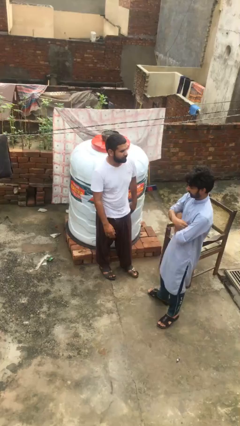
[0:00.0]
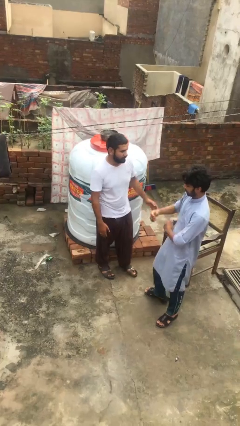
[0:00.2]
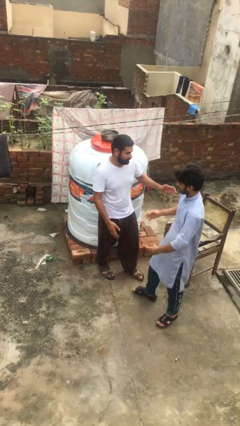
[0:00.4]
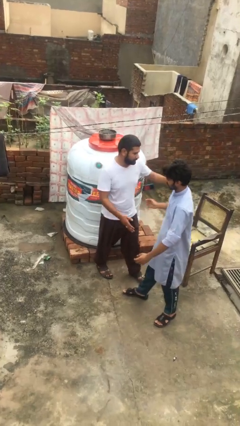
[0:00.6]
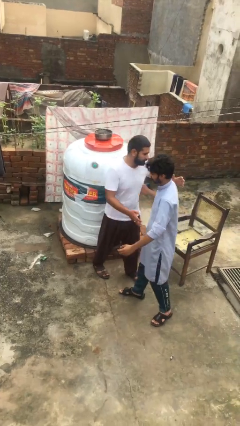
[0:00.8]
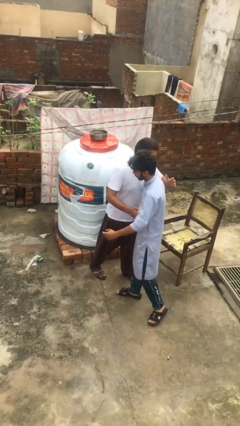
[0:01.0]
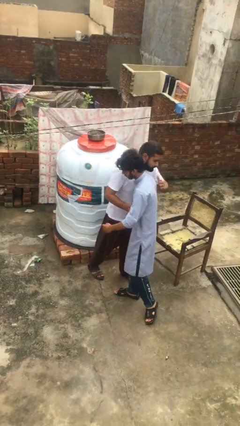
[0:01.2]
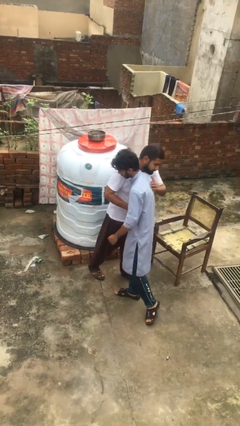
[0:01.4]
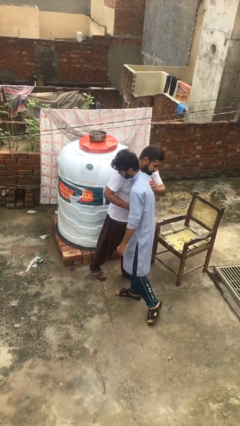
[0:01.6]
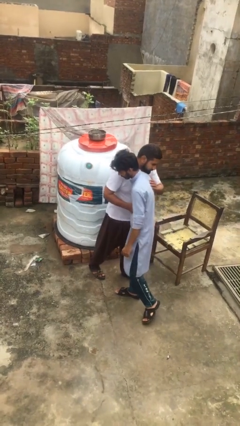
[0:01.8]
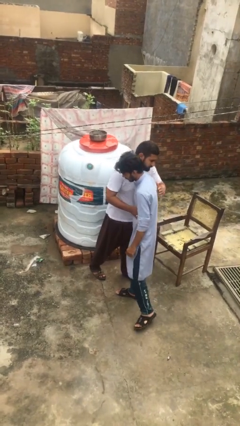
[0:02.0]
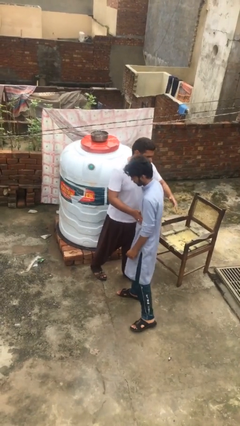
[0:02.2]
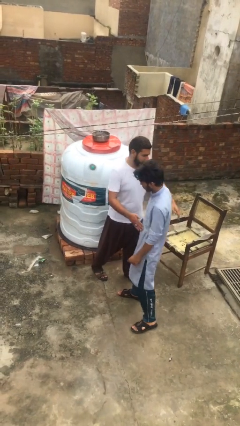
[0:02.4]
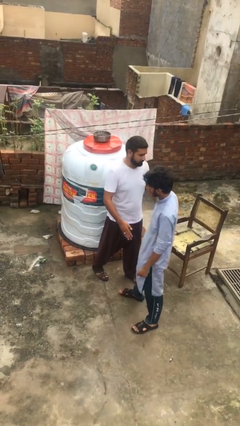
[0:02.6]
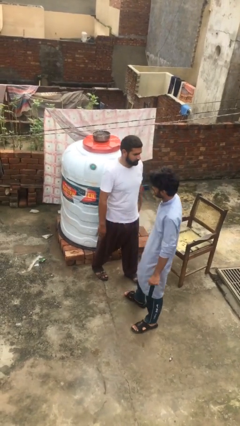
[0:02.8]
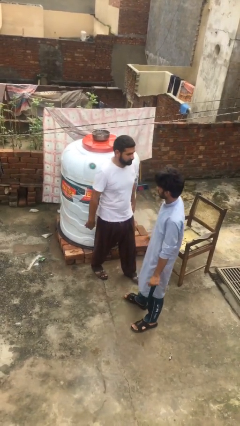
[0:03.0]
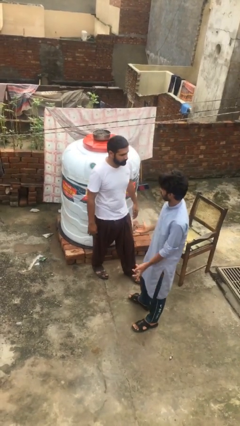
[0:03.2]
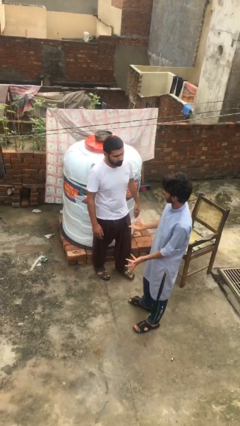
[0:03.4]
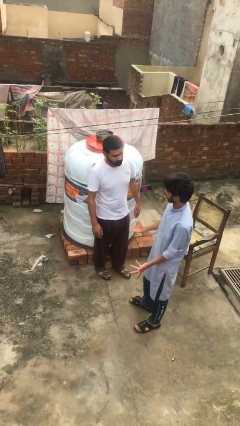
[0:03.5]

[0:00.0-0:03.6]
person embraces person

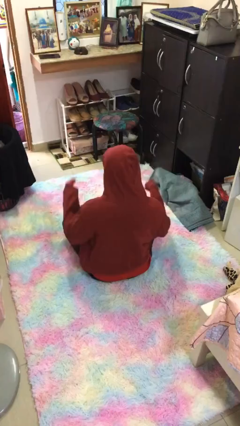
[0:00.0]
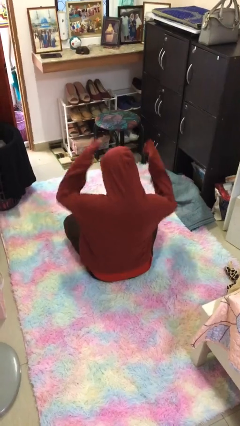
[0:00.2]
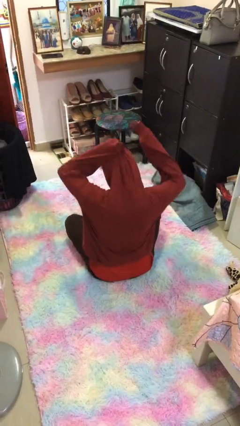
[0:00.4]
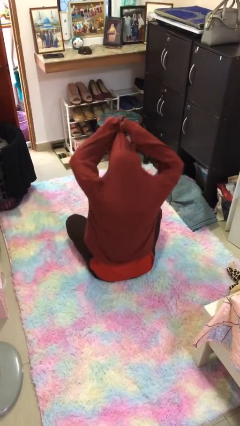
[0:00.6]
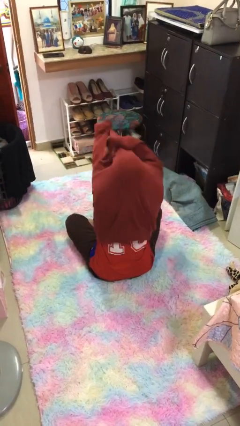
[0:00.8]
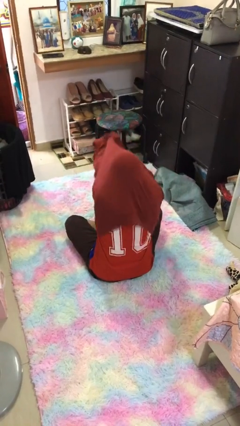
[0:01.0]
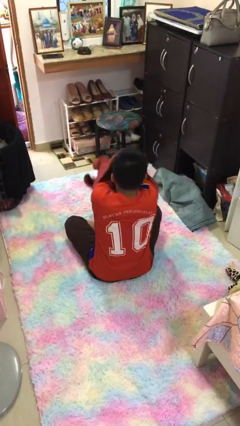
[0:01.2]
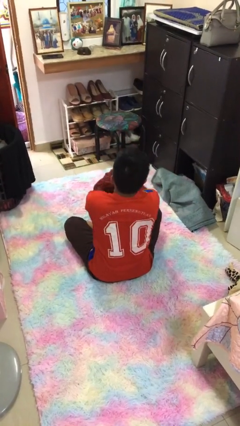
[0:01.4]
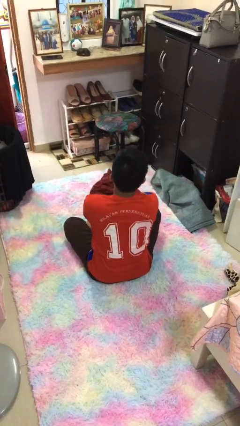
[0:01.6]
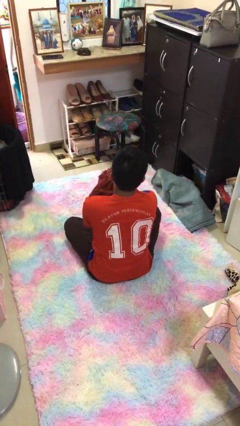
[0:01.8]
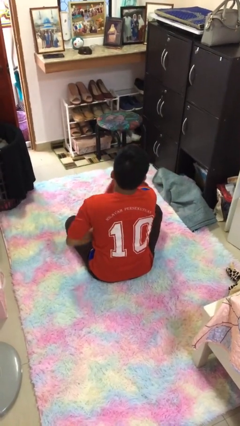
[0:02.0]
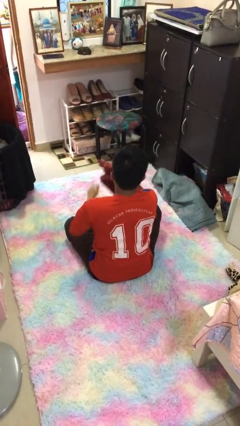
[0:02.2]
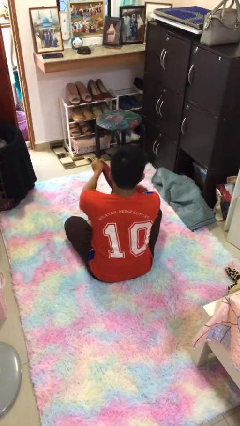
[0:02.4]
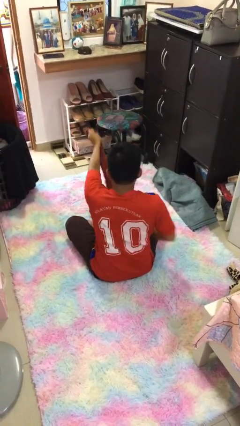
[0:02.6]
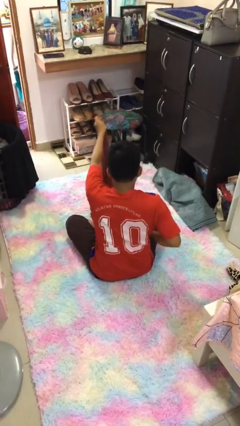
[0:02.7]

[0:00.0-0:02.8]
person takes off hoodie

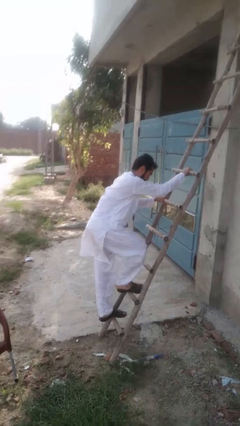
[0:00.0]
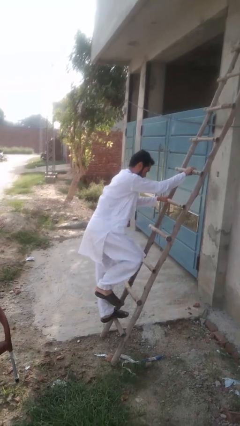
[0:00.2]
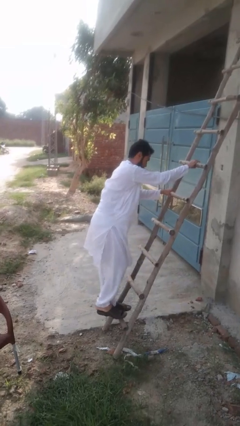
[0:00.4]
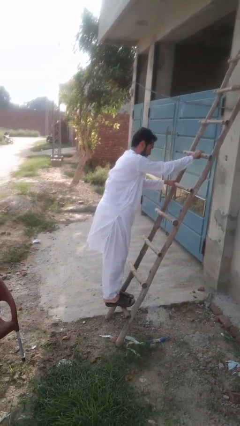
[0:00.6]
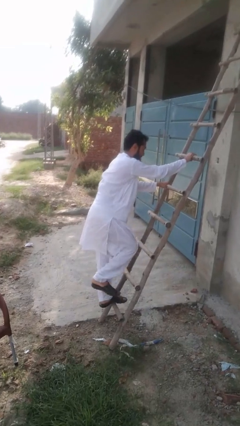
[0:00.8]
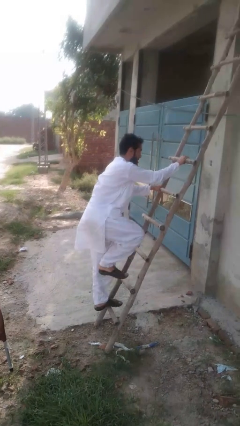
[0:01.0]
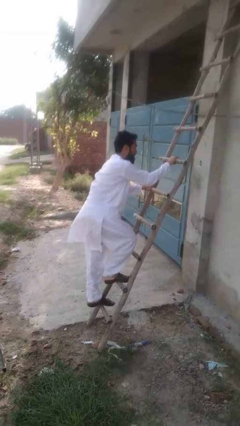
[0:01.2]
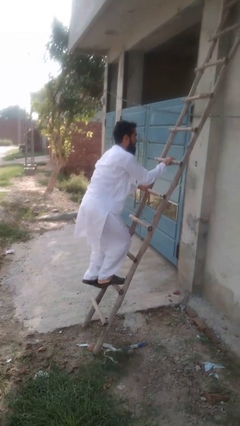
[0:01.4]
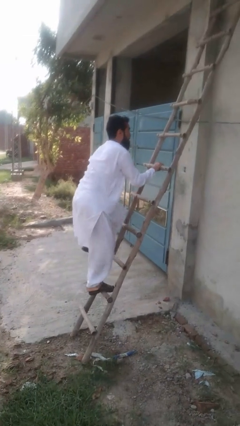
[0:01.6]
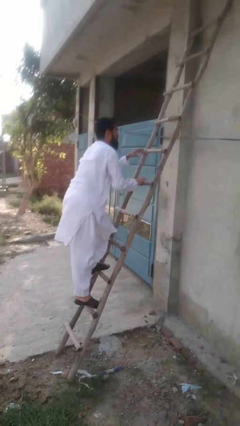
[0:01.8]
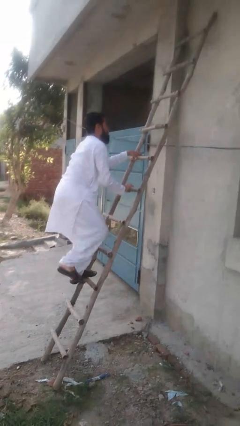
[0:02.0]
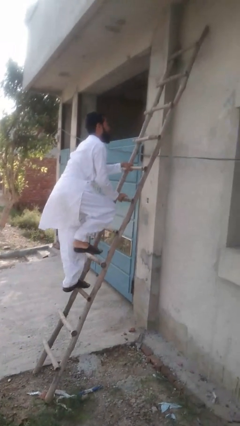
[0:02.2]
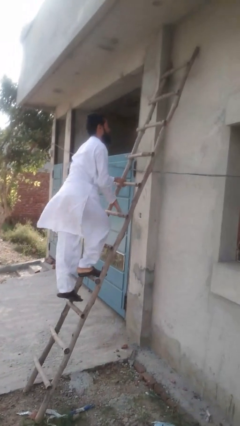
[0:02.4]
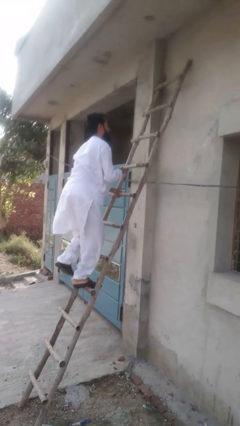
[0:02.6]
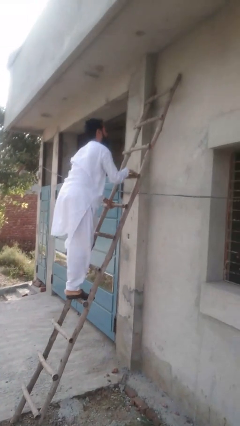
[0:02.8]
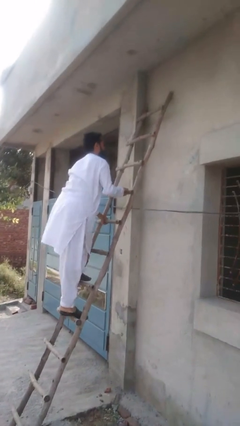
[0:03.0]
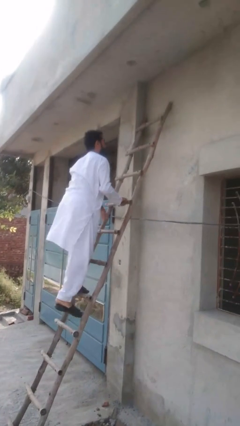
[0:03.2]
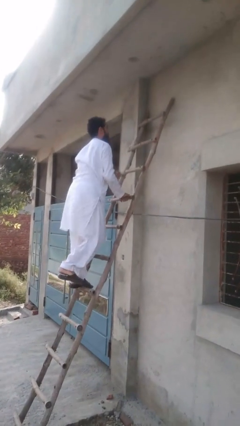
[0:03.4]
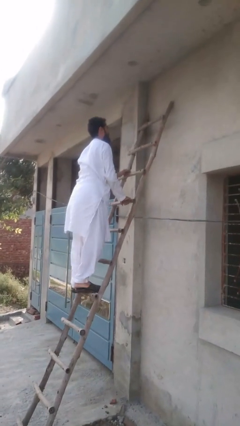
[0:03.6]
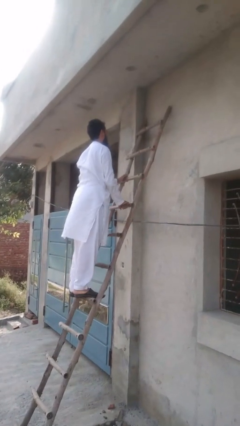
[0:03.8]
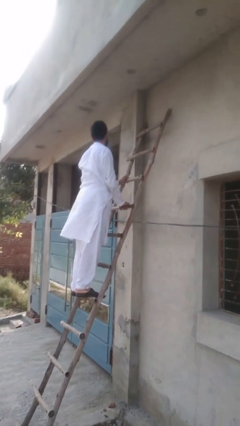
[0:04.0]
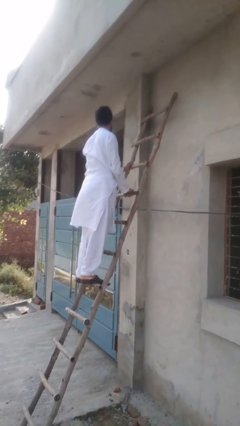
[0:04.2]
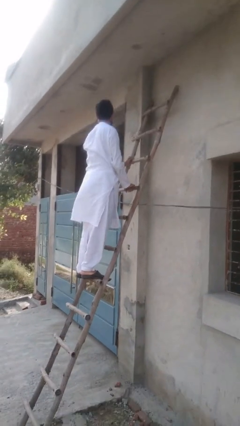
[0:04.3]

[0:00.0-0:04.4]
person climbs up stairs

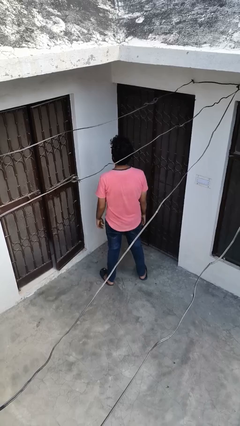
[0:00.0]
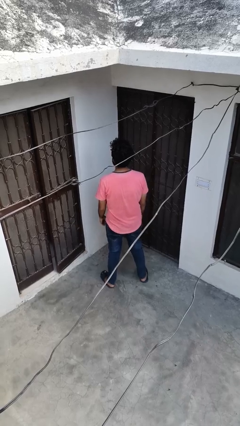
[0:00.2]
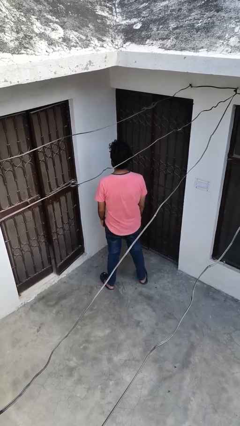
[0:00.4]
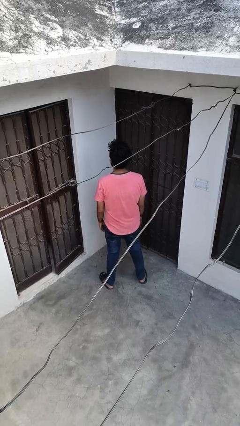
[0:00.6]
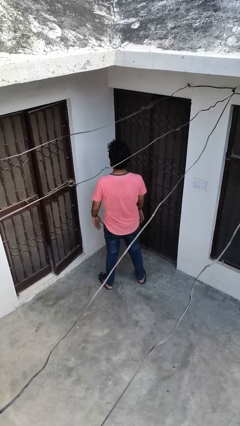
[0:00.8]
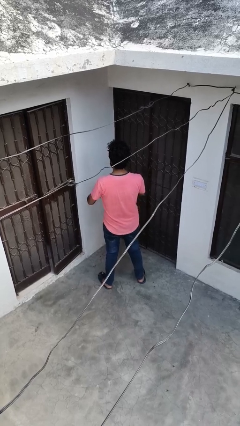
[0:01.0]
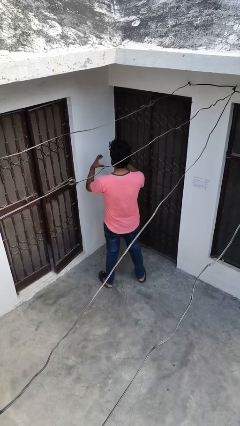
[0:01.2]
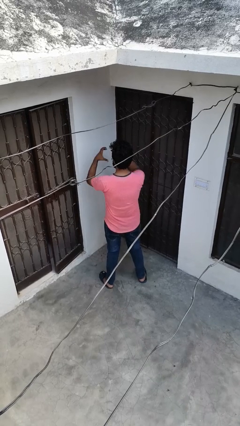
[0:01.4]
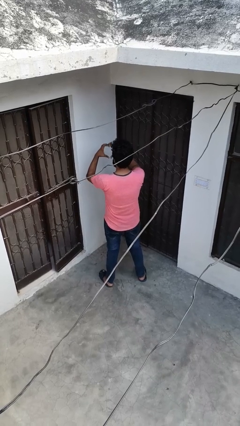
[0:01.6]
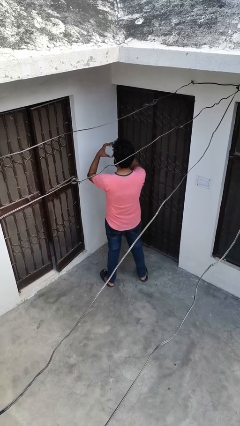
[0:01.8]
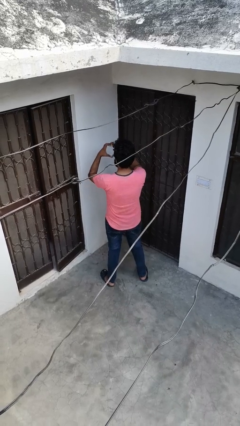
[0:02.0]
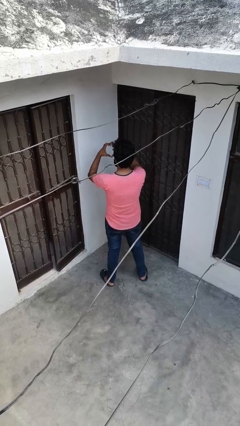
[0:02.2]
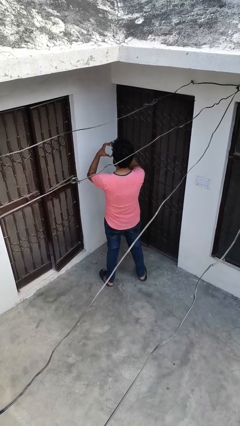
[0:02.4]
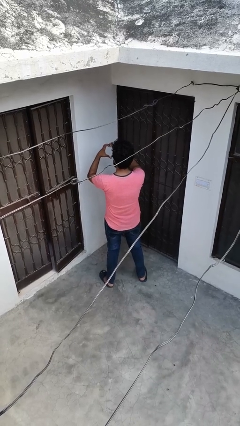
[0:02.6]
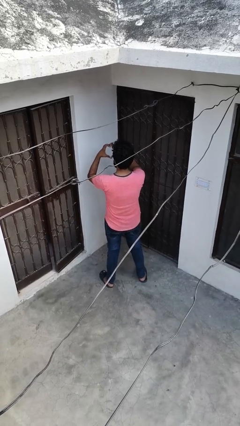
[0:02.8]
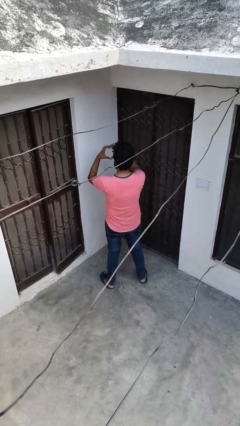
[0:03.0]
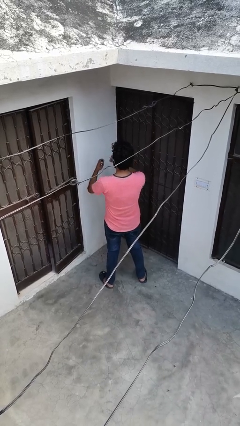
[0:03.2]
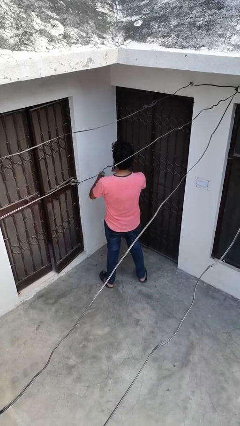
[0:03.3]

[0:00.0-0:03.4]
person gestures heart

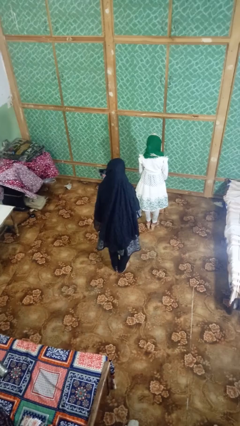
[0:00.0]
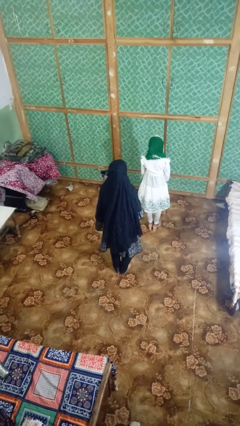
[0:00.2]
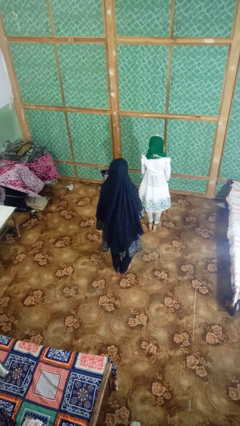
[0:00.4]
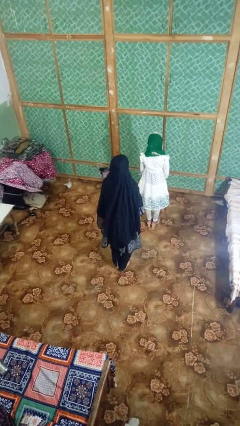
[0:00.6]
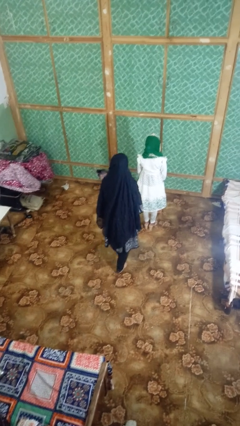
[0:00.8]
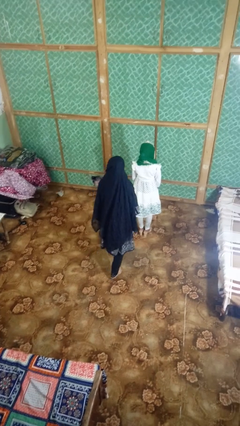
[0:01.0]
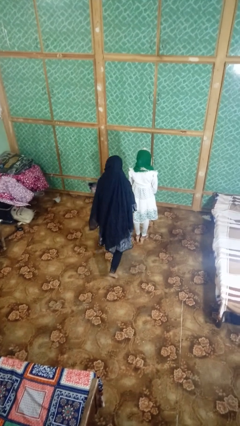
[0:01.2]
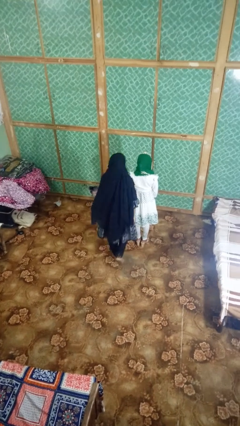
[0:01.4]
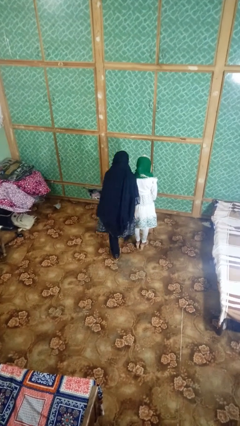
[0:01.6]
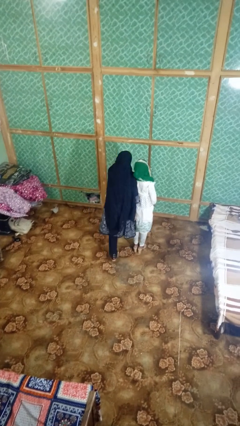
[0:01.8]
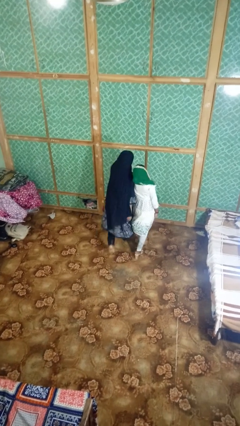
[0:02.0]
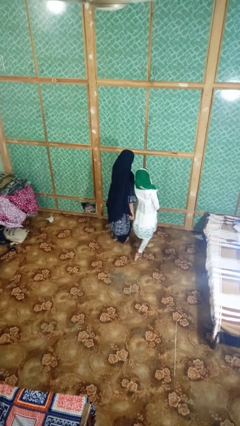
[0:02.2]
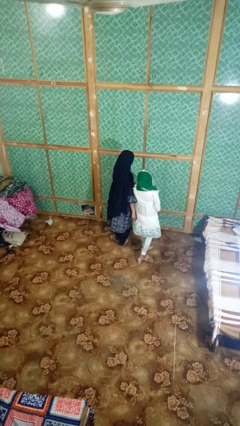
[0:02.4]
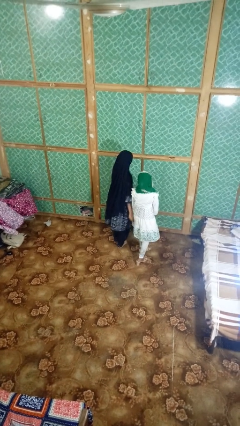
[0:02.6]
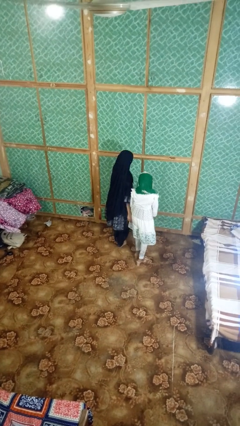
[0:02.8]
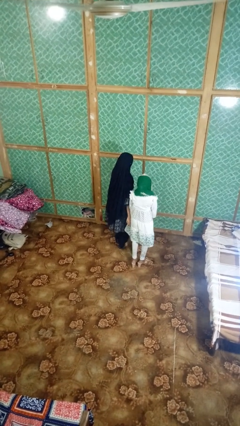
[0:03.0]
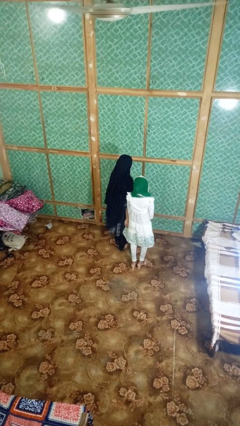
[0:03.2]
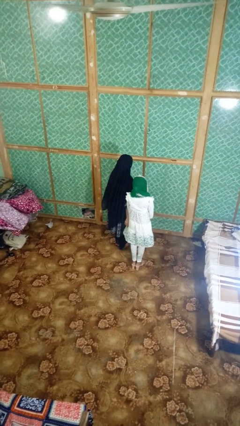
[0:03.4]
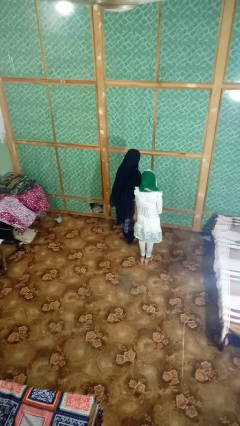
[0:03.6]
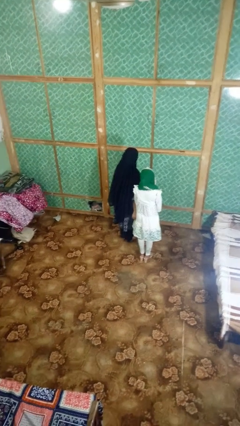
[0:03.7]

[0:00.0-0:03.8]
person bumps into person
